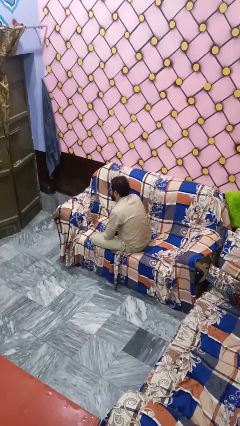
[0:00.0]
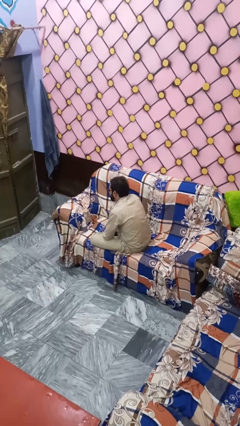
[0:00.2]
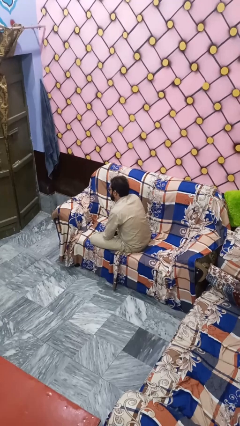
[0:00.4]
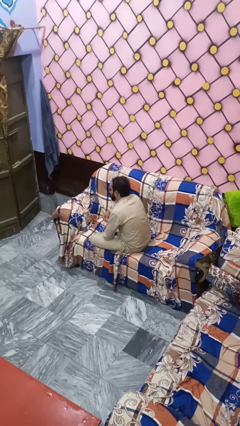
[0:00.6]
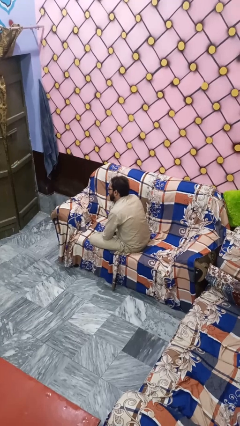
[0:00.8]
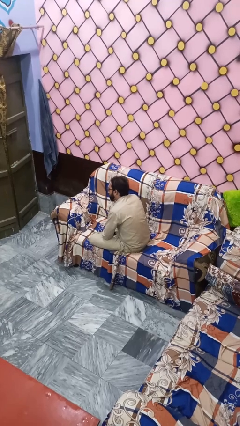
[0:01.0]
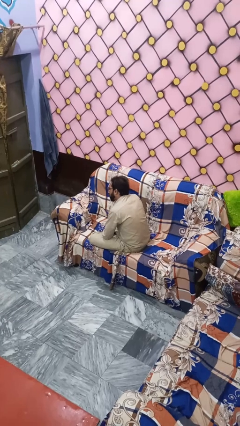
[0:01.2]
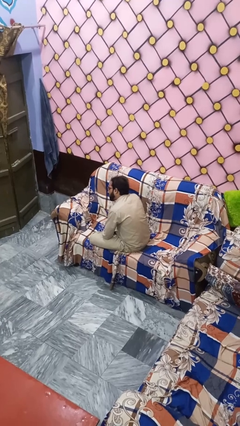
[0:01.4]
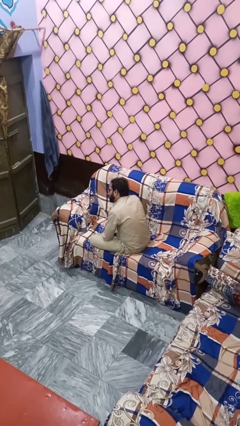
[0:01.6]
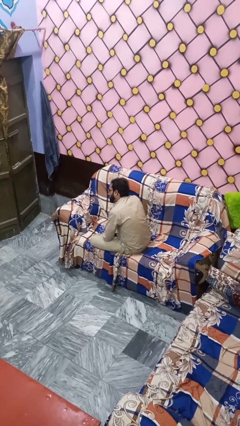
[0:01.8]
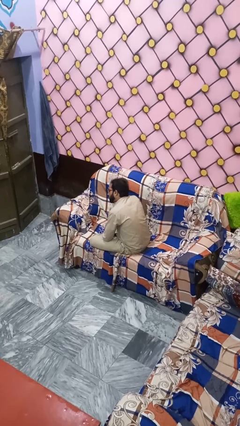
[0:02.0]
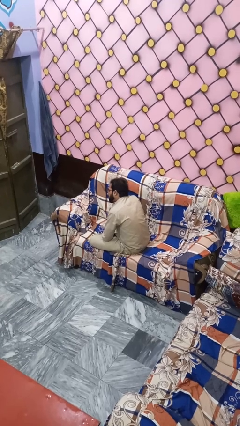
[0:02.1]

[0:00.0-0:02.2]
person sticks out tongue

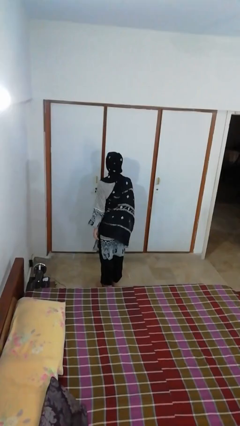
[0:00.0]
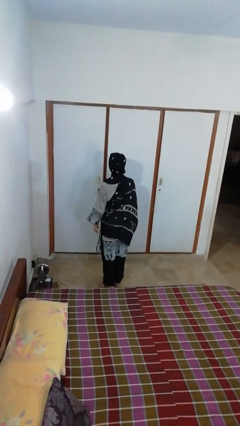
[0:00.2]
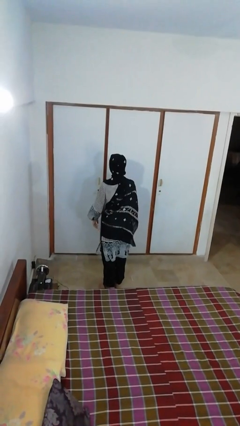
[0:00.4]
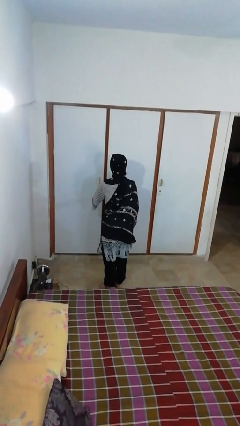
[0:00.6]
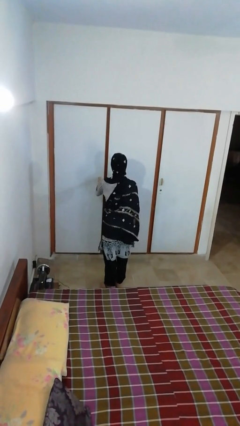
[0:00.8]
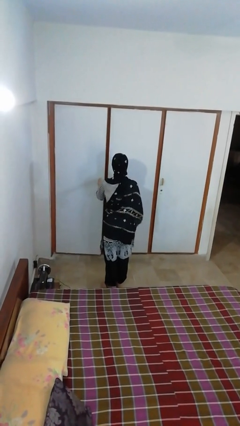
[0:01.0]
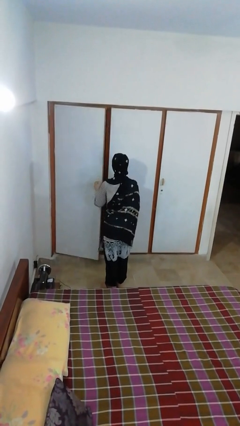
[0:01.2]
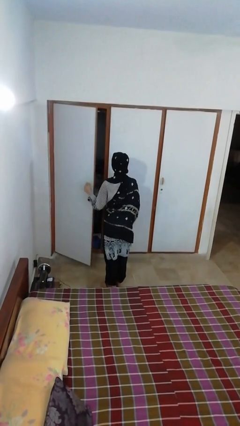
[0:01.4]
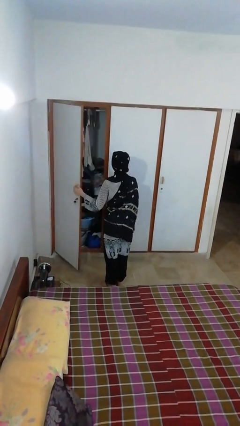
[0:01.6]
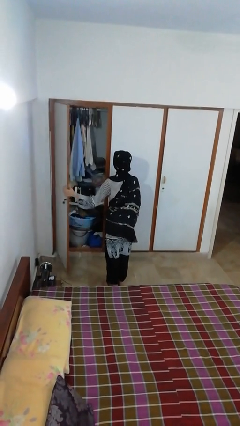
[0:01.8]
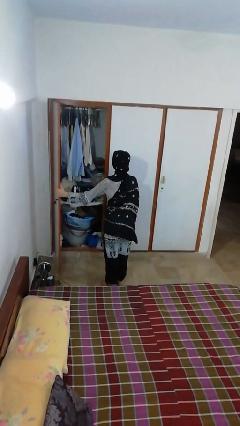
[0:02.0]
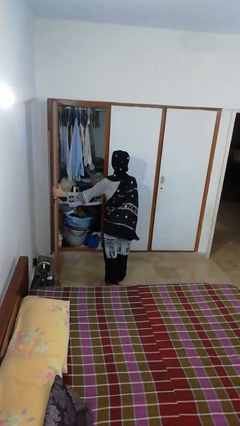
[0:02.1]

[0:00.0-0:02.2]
person opens closet door

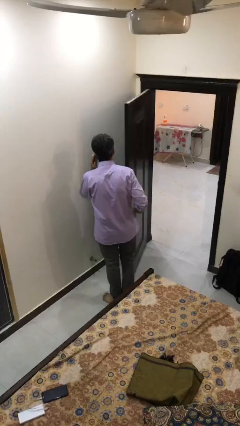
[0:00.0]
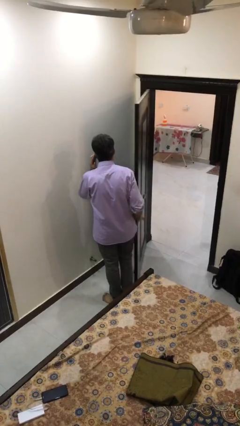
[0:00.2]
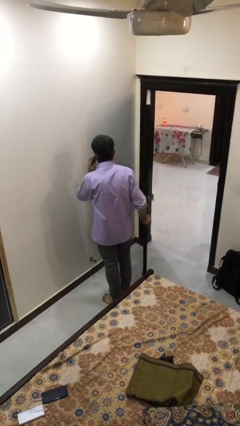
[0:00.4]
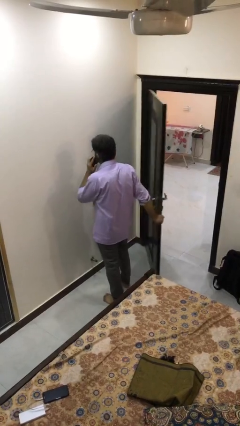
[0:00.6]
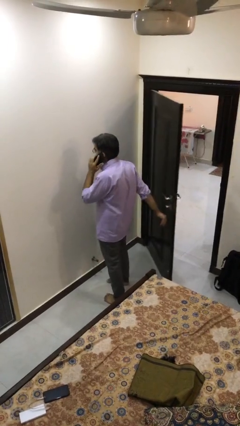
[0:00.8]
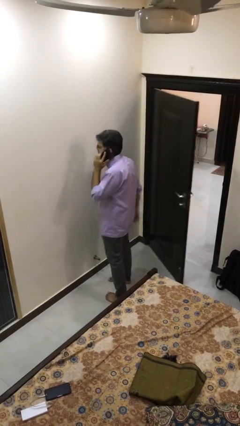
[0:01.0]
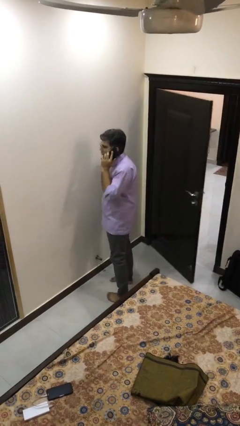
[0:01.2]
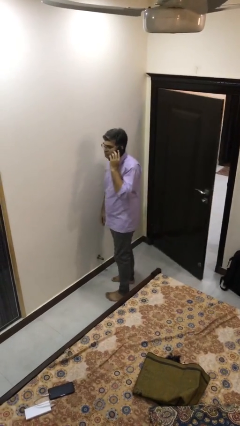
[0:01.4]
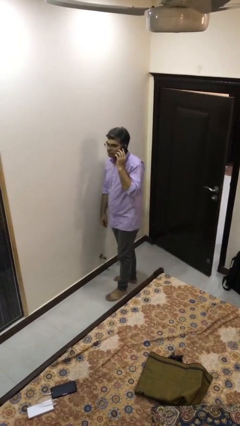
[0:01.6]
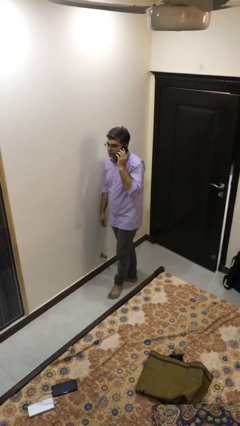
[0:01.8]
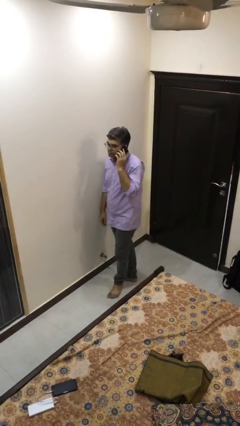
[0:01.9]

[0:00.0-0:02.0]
person closes facility door

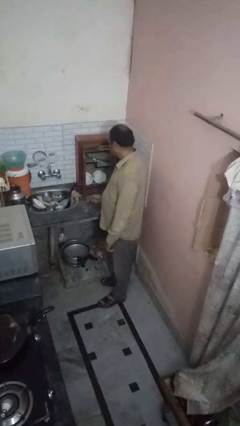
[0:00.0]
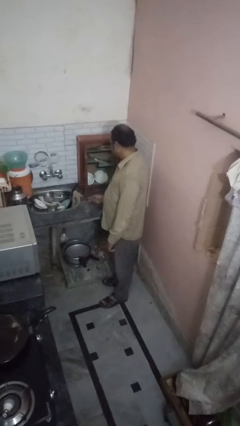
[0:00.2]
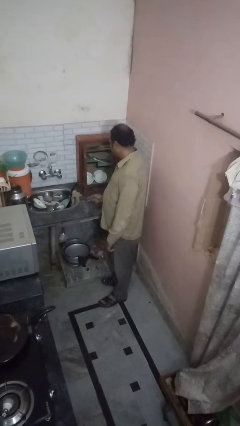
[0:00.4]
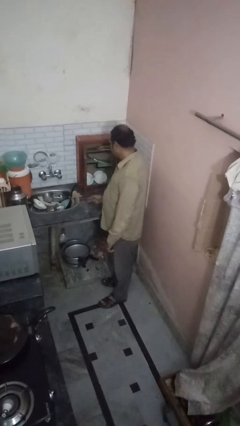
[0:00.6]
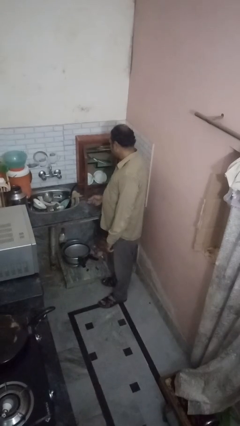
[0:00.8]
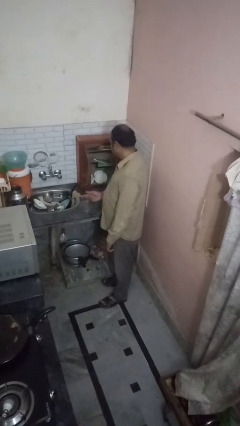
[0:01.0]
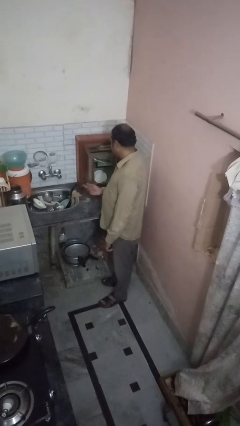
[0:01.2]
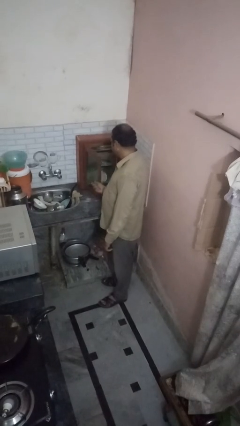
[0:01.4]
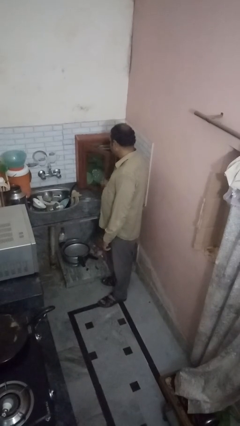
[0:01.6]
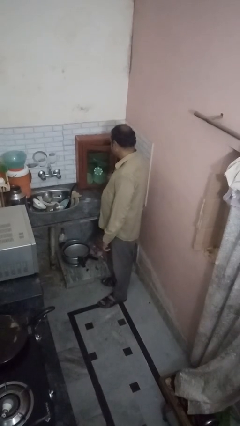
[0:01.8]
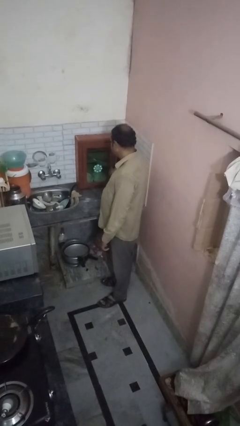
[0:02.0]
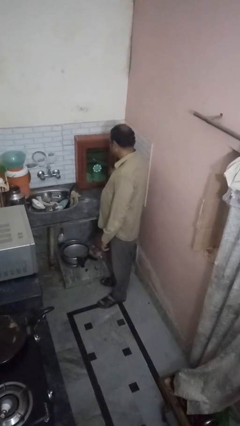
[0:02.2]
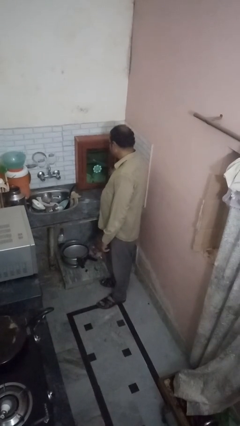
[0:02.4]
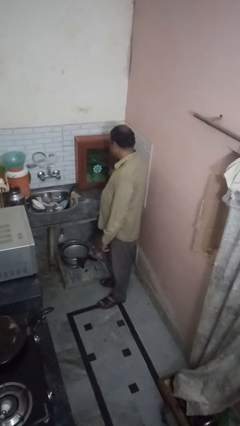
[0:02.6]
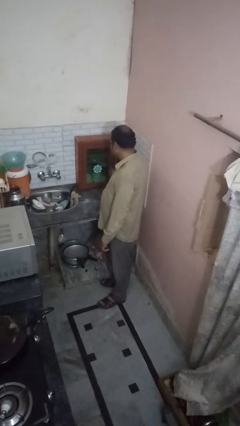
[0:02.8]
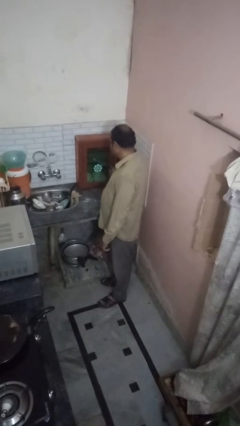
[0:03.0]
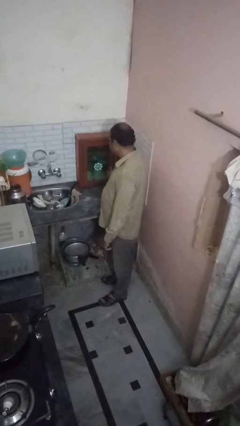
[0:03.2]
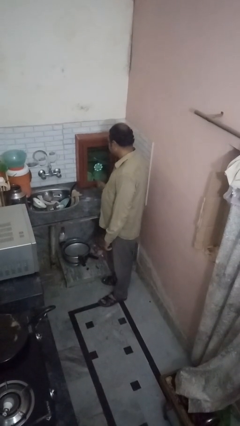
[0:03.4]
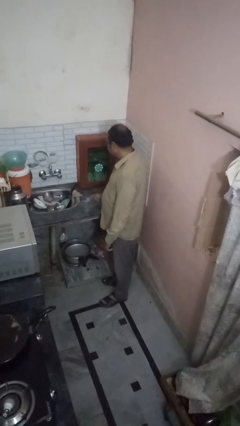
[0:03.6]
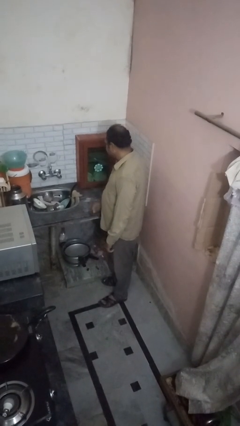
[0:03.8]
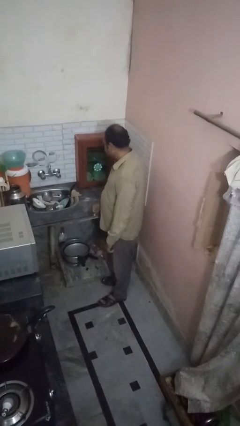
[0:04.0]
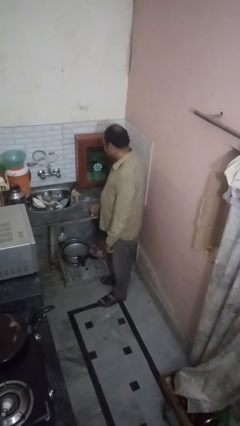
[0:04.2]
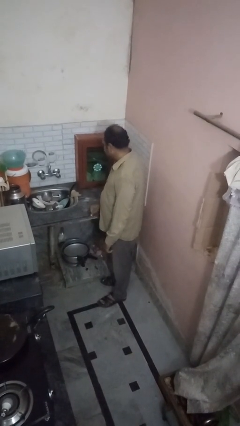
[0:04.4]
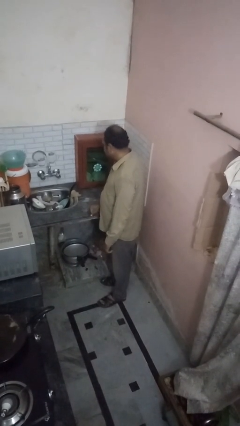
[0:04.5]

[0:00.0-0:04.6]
person closes cabinet

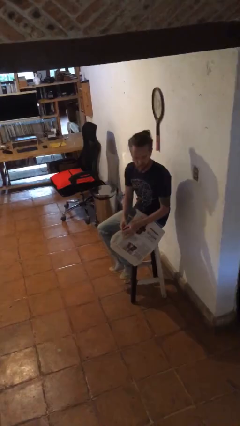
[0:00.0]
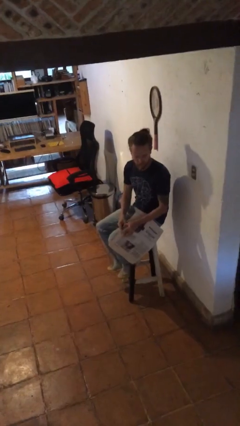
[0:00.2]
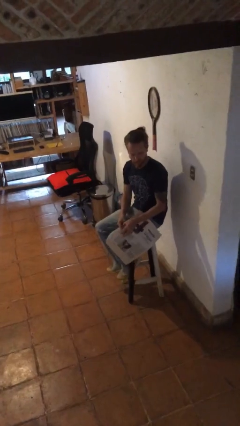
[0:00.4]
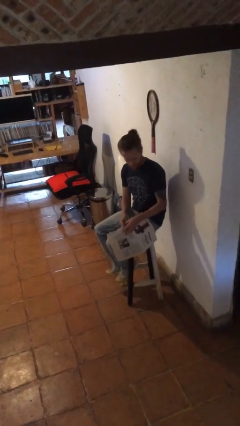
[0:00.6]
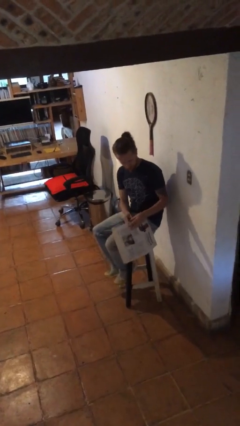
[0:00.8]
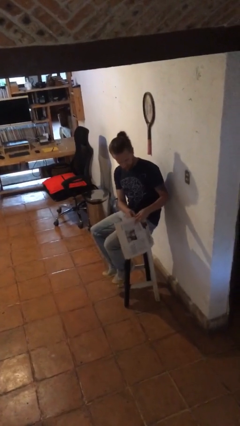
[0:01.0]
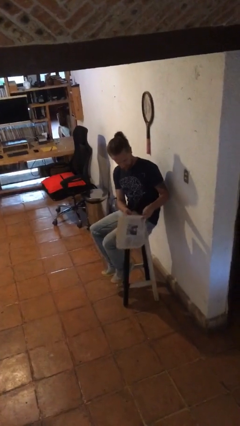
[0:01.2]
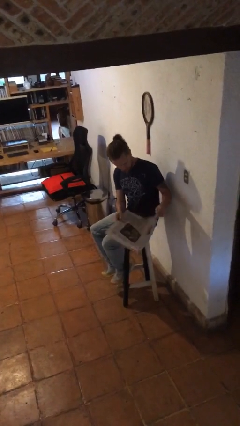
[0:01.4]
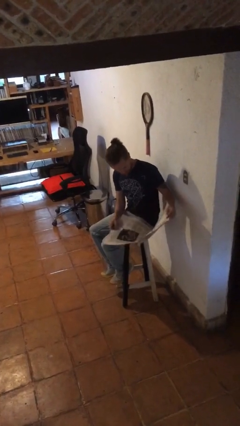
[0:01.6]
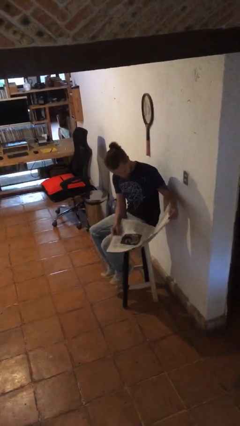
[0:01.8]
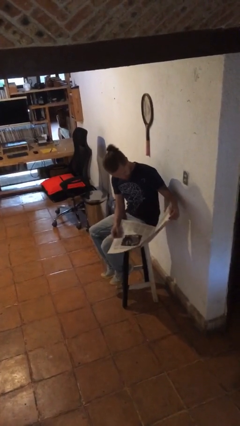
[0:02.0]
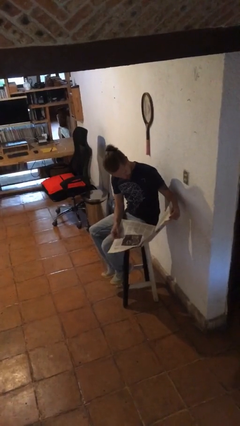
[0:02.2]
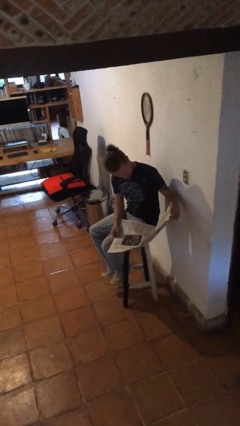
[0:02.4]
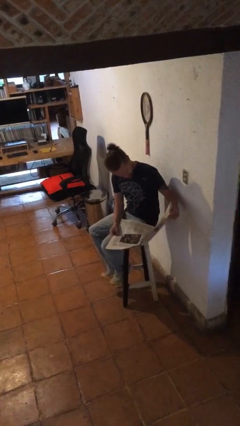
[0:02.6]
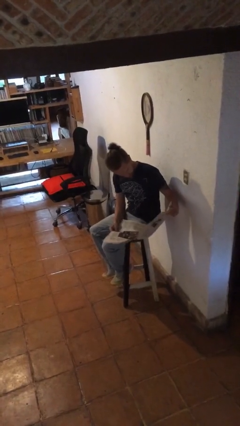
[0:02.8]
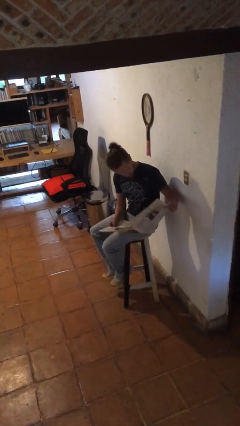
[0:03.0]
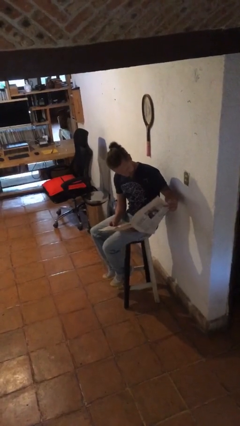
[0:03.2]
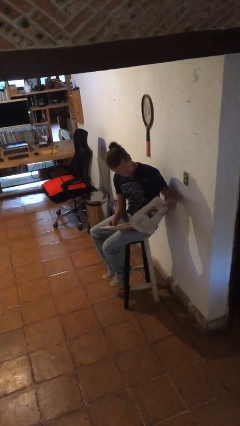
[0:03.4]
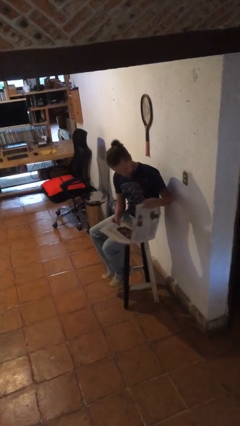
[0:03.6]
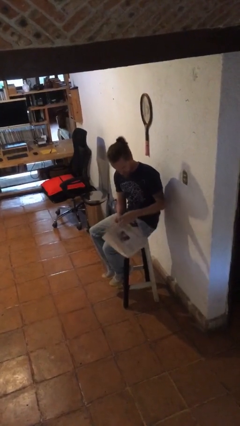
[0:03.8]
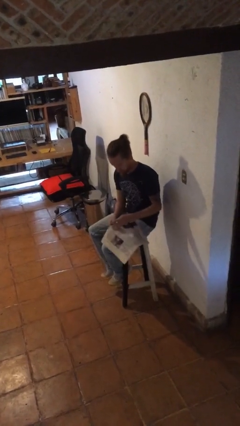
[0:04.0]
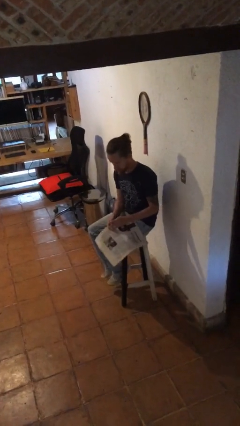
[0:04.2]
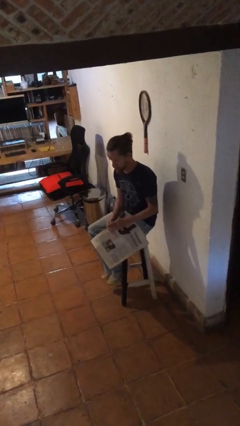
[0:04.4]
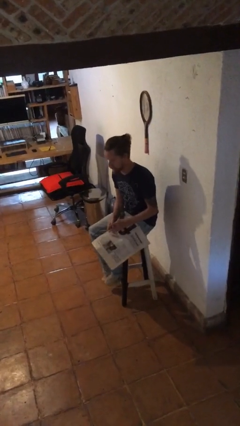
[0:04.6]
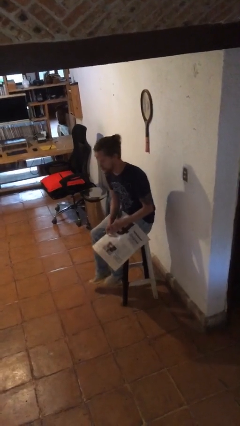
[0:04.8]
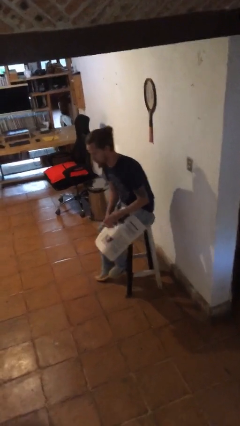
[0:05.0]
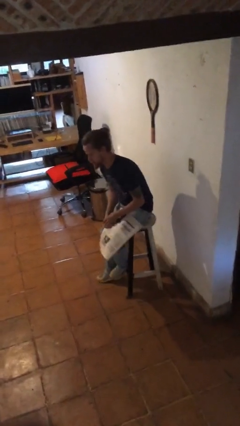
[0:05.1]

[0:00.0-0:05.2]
person reads newspaper

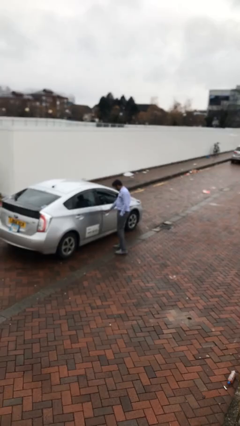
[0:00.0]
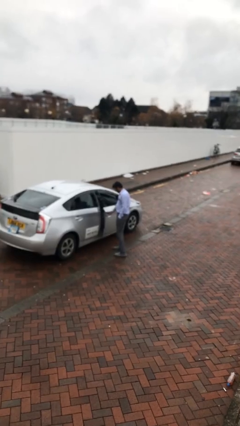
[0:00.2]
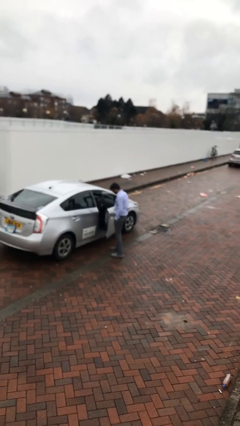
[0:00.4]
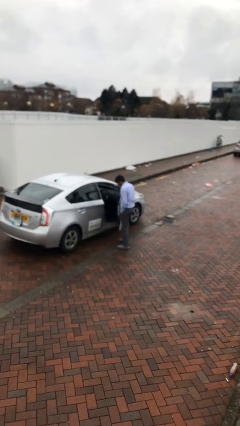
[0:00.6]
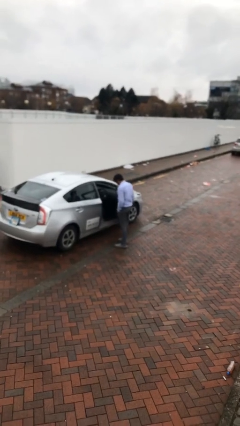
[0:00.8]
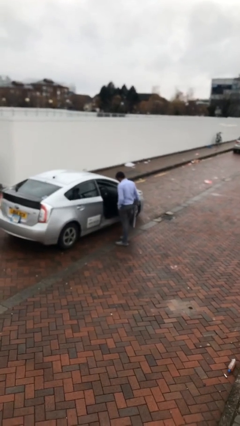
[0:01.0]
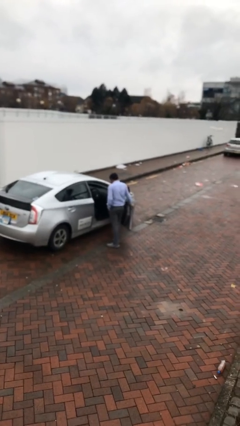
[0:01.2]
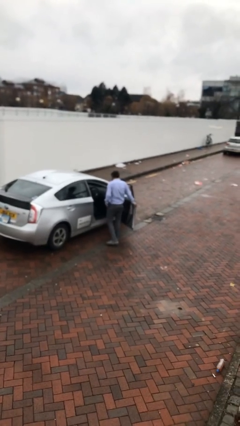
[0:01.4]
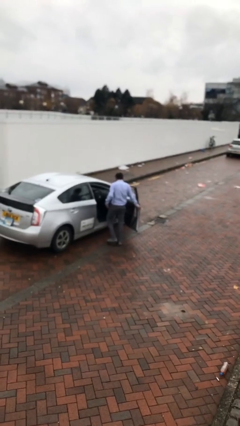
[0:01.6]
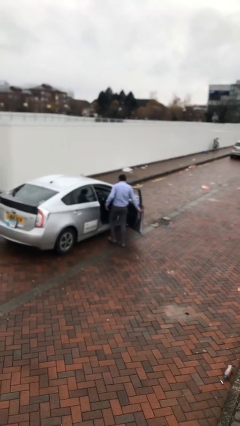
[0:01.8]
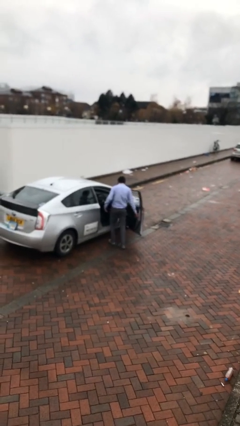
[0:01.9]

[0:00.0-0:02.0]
person opens car door
